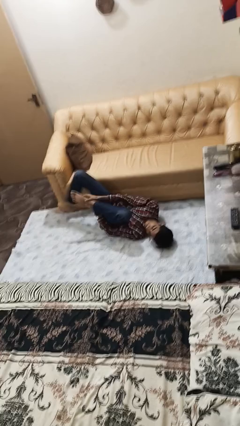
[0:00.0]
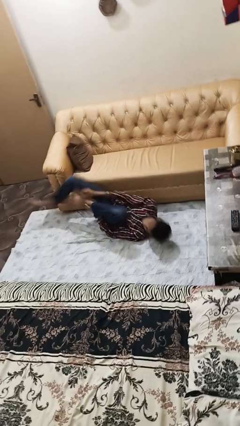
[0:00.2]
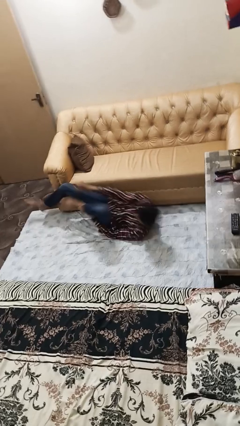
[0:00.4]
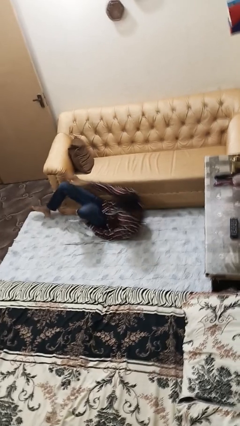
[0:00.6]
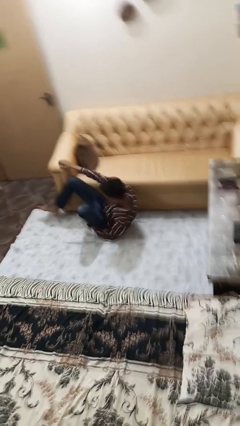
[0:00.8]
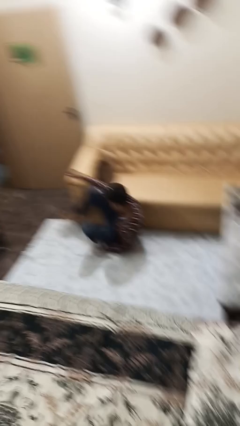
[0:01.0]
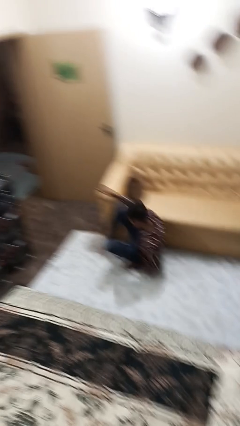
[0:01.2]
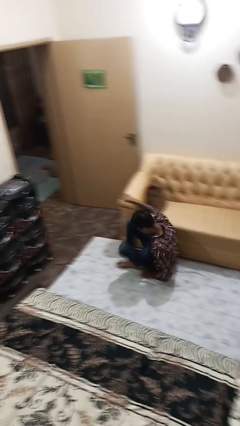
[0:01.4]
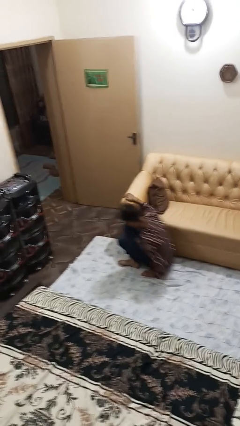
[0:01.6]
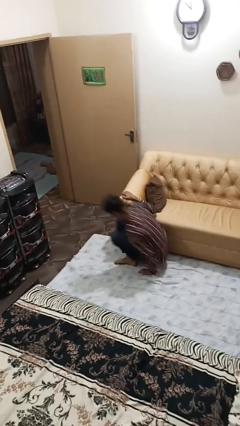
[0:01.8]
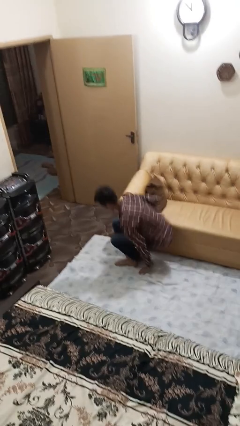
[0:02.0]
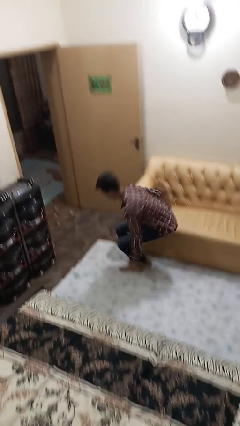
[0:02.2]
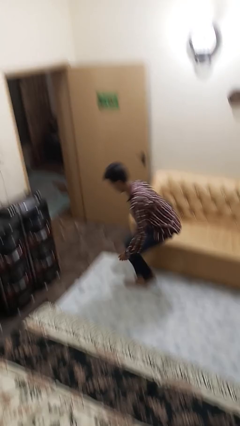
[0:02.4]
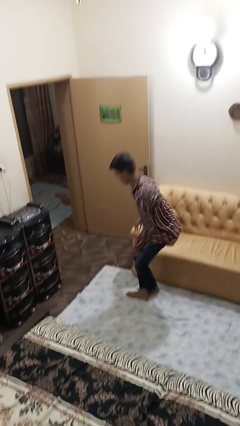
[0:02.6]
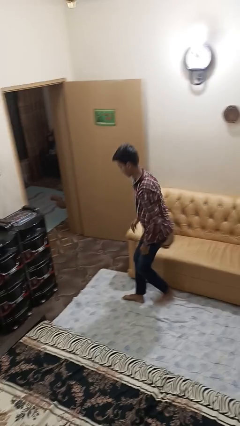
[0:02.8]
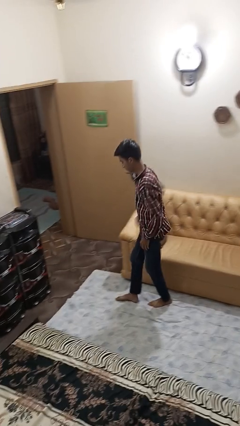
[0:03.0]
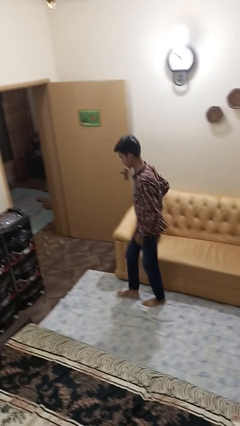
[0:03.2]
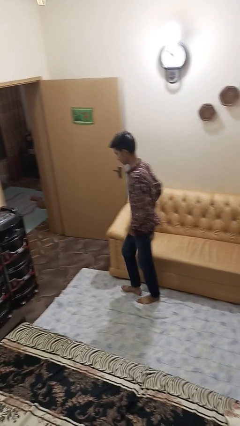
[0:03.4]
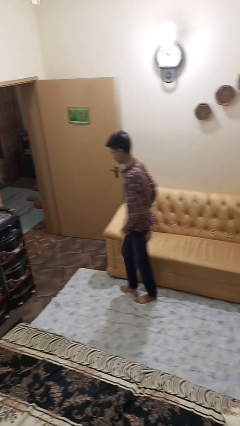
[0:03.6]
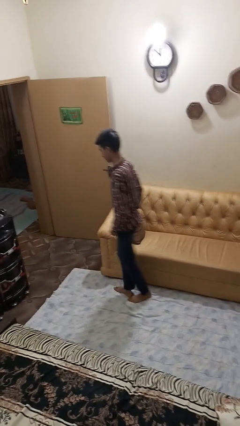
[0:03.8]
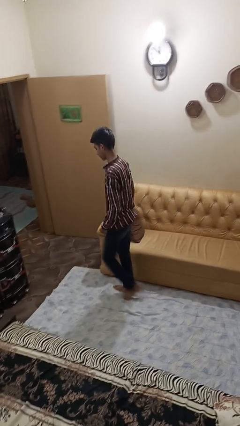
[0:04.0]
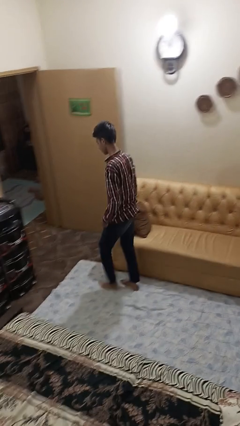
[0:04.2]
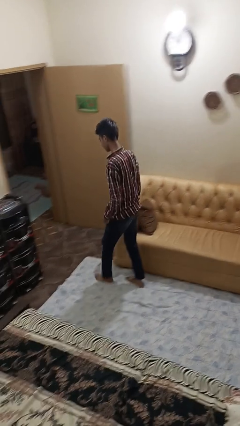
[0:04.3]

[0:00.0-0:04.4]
person stands up from floor

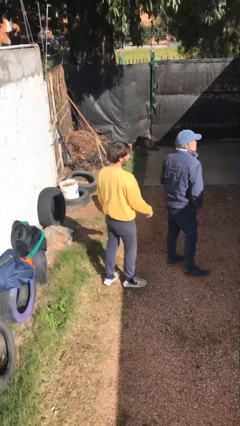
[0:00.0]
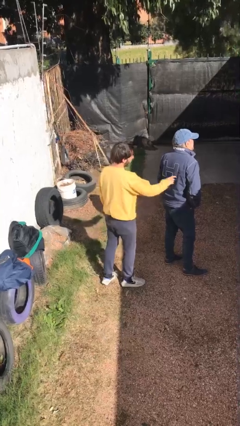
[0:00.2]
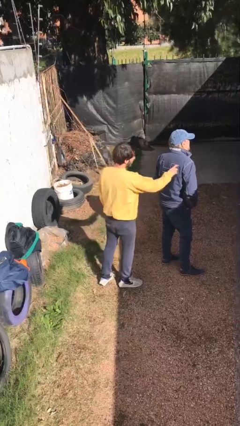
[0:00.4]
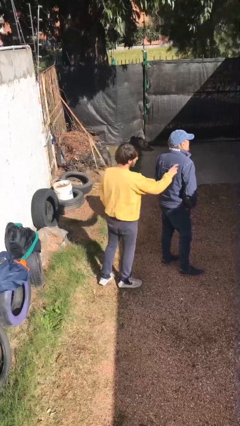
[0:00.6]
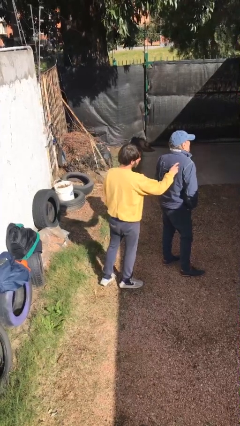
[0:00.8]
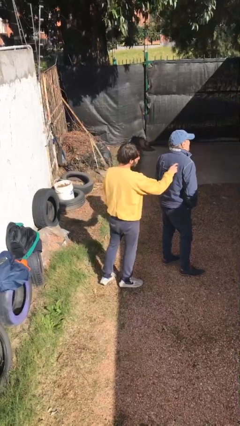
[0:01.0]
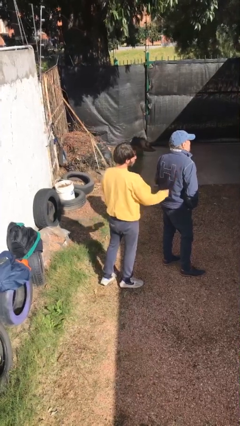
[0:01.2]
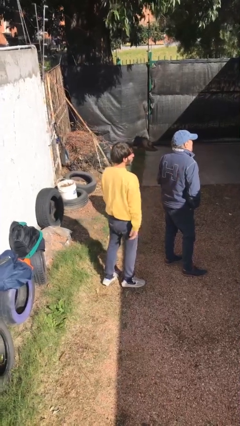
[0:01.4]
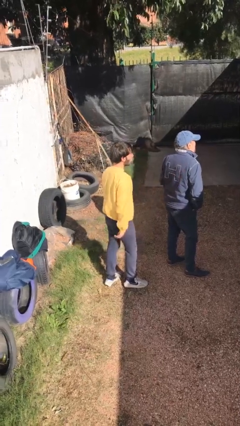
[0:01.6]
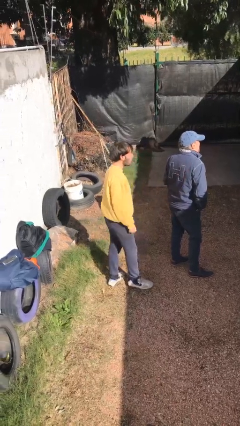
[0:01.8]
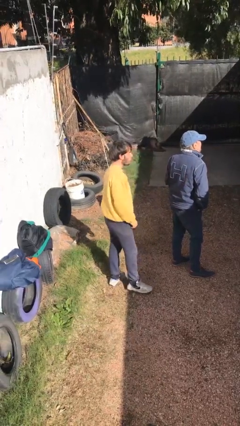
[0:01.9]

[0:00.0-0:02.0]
person touches back of person

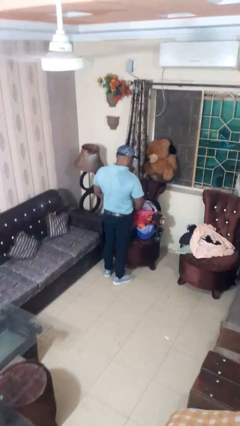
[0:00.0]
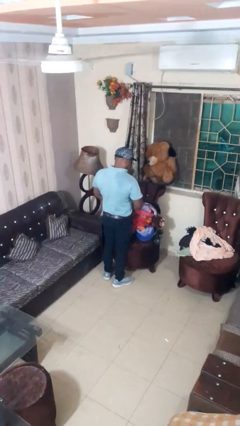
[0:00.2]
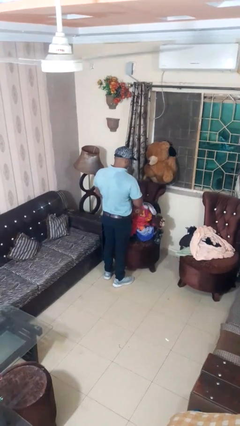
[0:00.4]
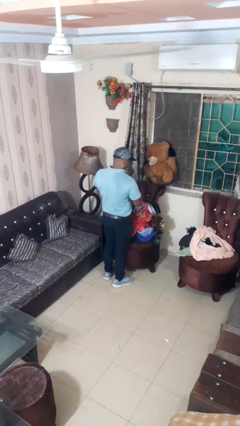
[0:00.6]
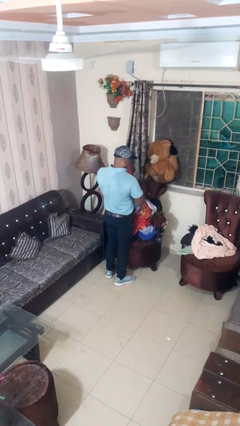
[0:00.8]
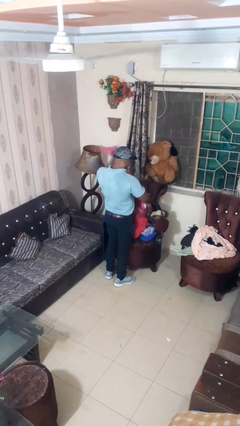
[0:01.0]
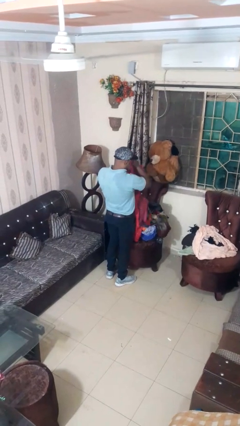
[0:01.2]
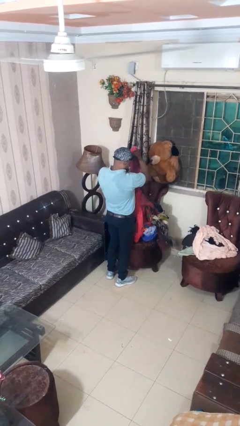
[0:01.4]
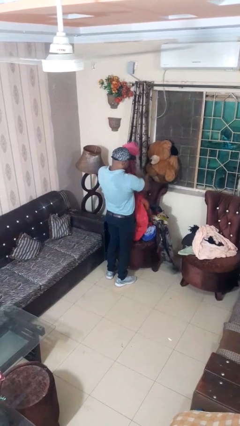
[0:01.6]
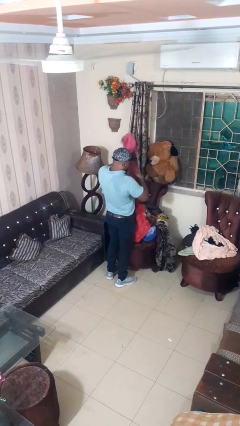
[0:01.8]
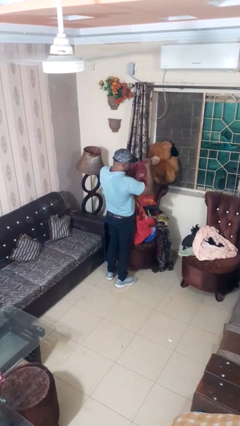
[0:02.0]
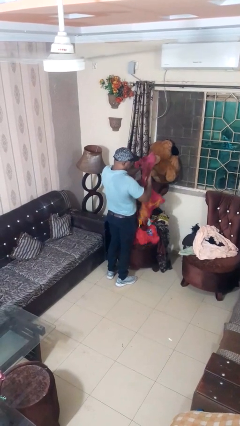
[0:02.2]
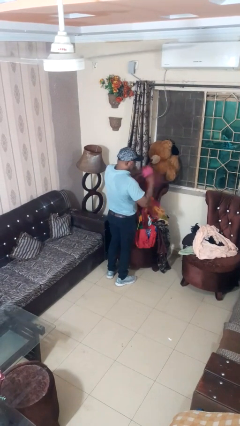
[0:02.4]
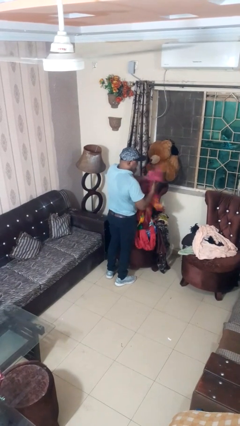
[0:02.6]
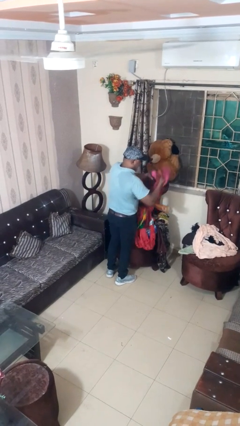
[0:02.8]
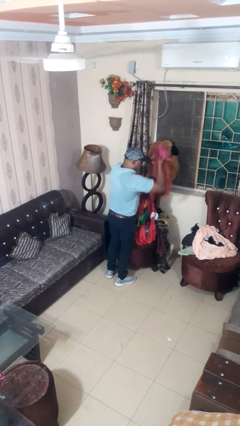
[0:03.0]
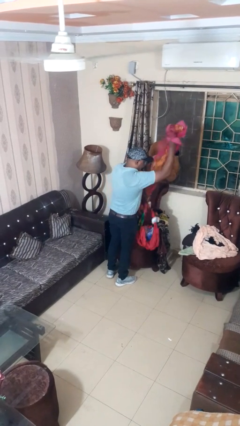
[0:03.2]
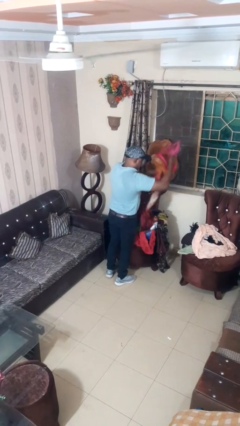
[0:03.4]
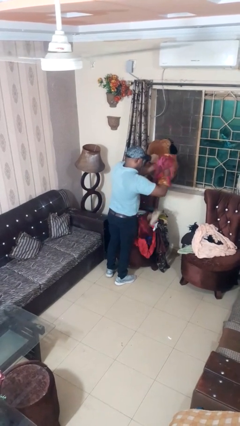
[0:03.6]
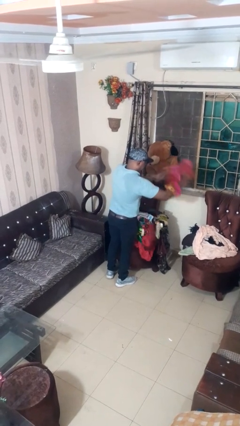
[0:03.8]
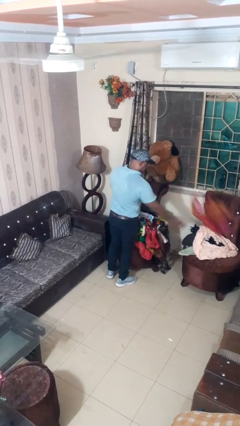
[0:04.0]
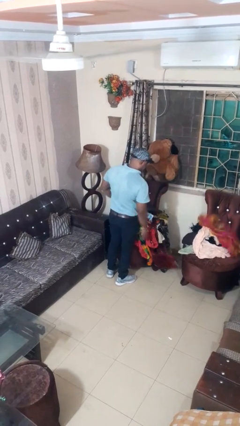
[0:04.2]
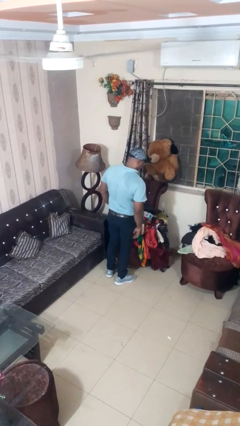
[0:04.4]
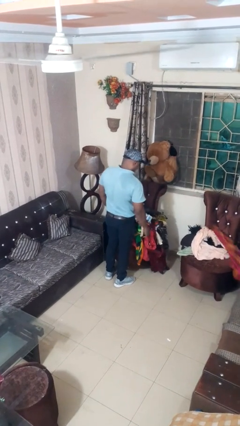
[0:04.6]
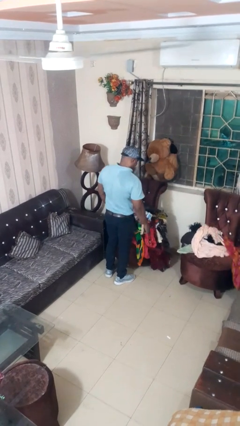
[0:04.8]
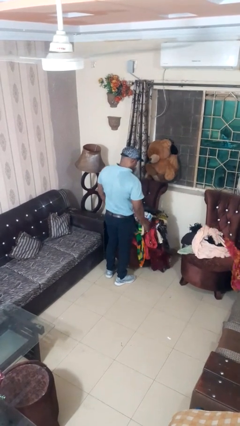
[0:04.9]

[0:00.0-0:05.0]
person unloads clothes from suitcase

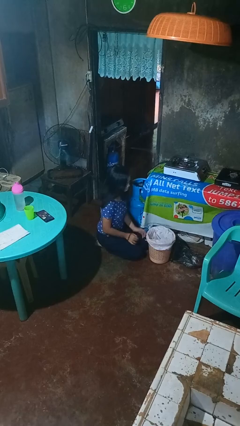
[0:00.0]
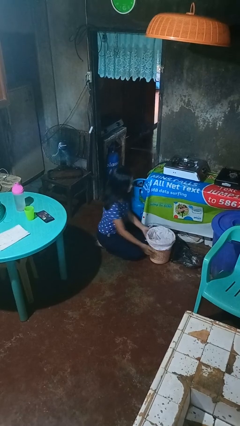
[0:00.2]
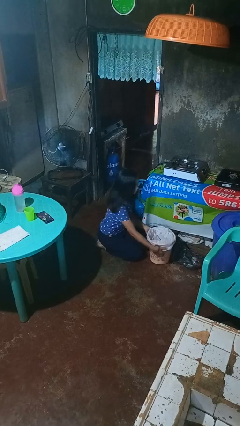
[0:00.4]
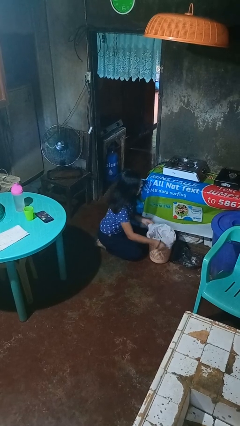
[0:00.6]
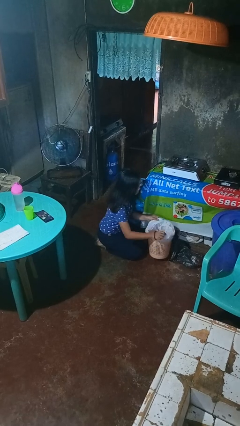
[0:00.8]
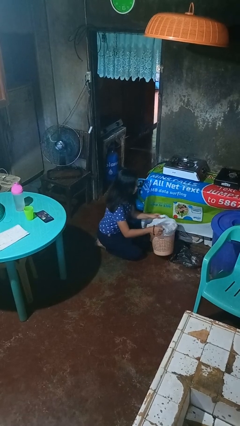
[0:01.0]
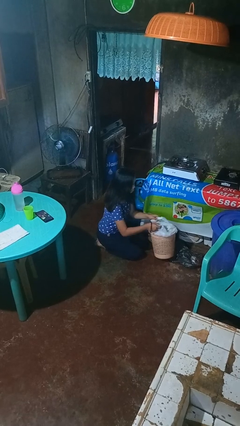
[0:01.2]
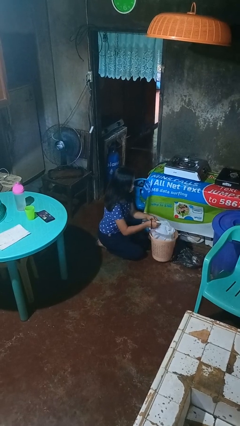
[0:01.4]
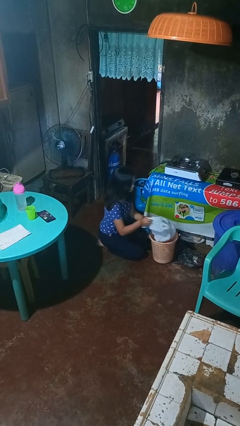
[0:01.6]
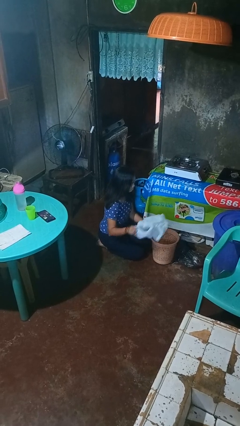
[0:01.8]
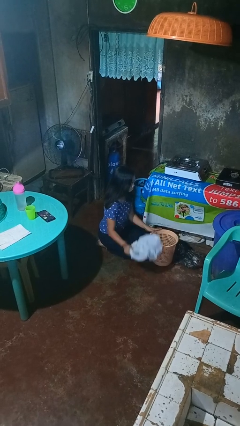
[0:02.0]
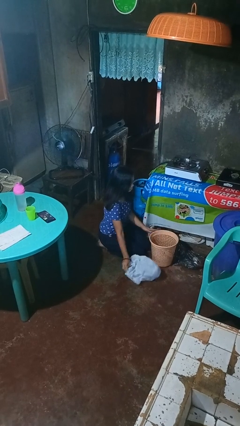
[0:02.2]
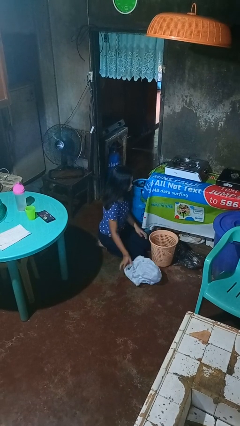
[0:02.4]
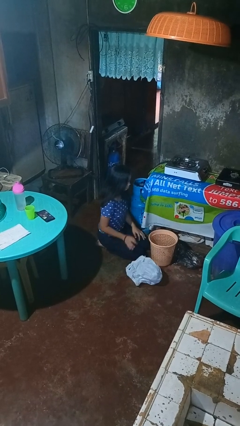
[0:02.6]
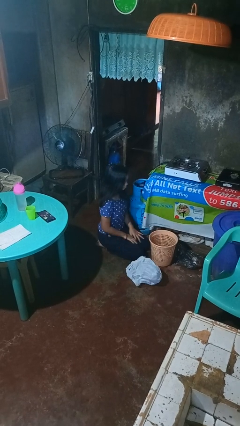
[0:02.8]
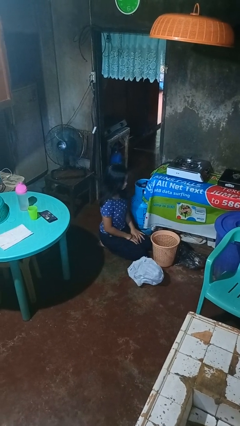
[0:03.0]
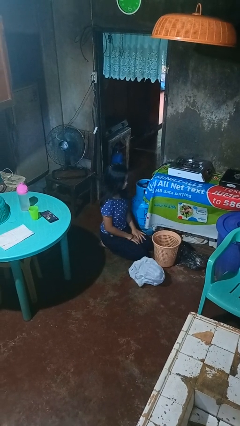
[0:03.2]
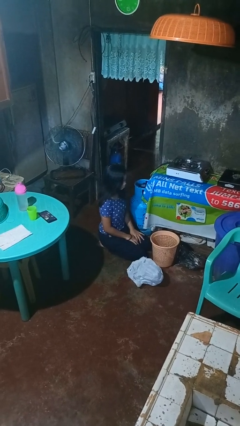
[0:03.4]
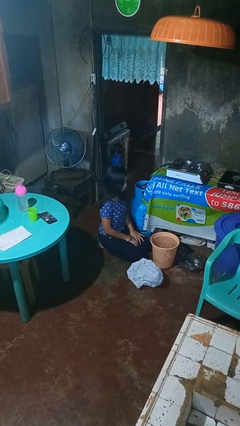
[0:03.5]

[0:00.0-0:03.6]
person removes trashbag from trashcan

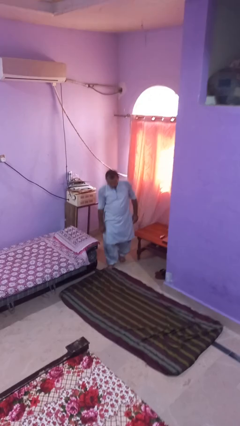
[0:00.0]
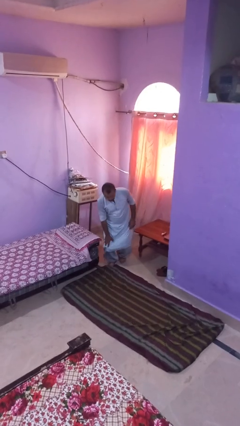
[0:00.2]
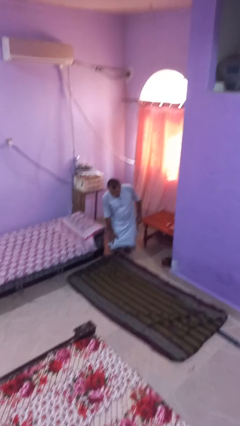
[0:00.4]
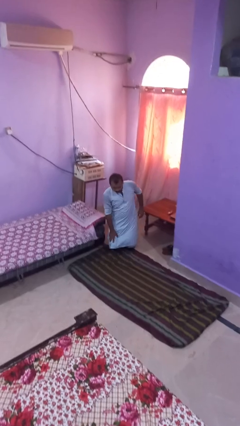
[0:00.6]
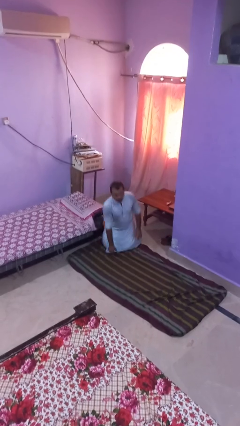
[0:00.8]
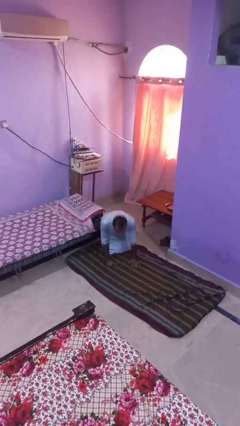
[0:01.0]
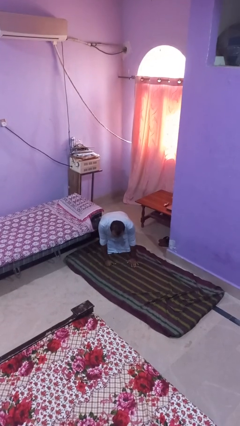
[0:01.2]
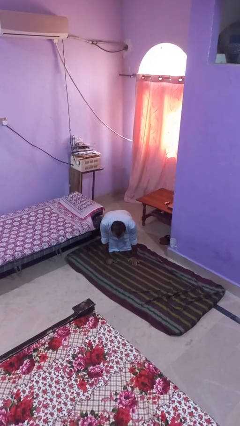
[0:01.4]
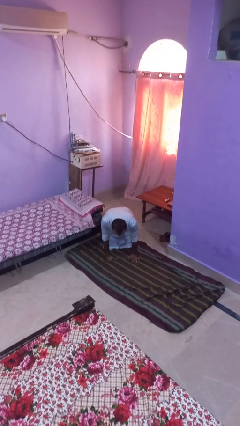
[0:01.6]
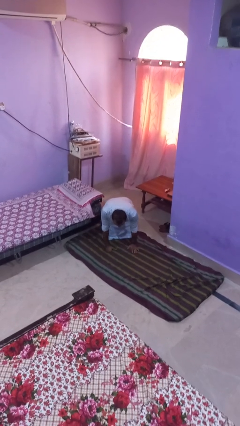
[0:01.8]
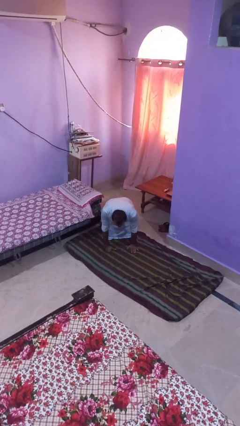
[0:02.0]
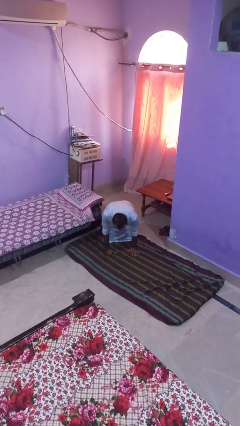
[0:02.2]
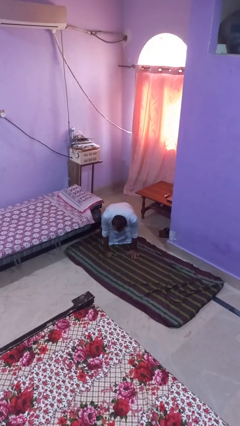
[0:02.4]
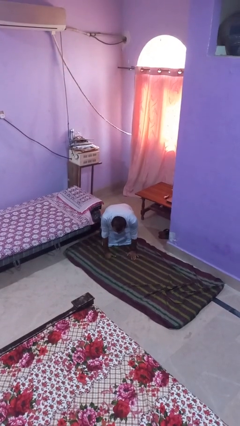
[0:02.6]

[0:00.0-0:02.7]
person trips on object on floor

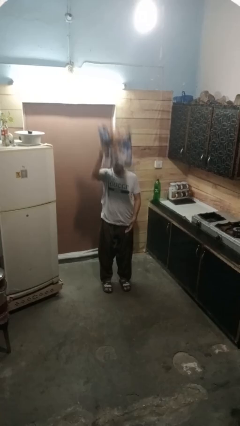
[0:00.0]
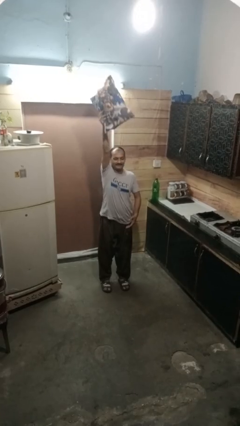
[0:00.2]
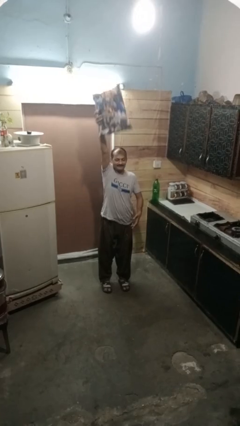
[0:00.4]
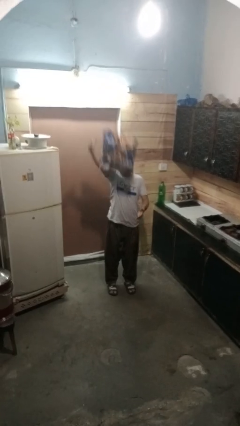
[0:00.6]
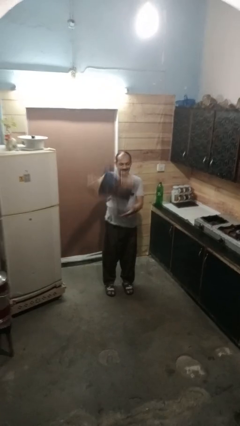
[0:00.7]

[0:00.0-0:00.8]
person drops object
